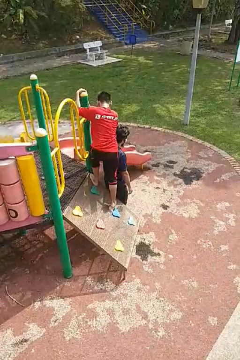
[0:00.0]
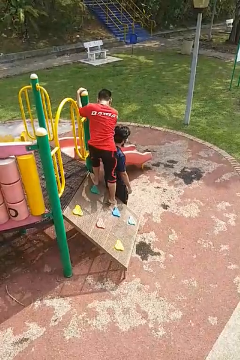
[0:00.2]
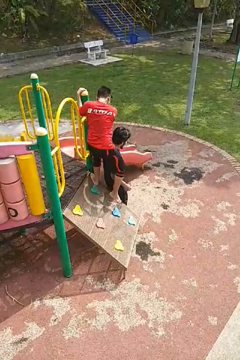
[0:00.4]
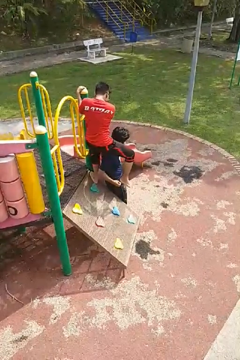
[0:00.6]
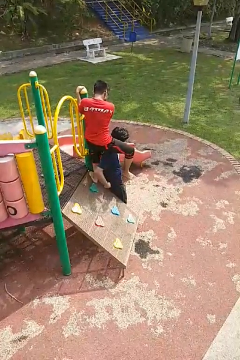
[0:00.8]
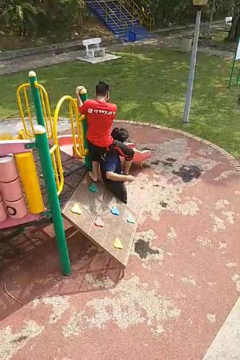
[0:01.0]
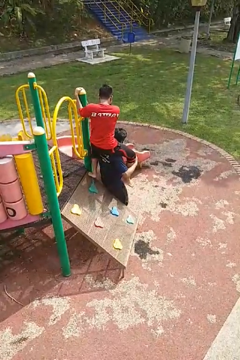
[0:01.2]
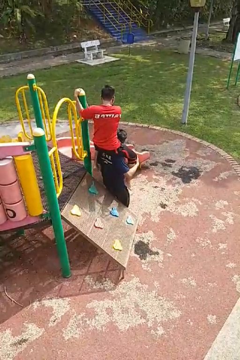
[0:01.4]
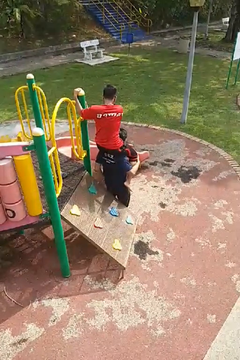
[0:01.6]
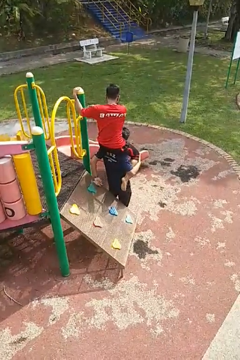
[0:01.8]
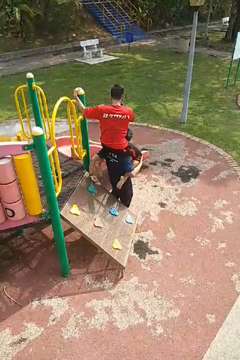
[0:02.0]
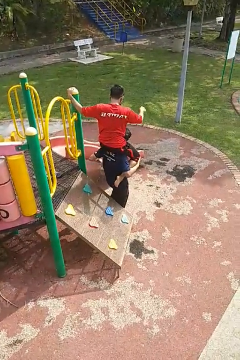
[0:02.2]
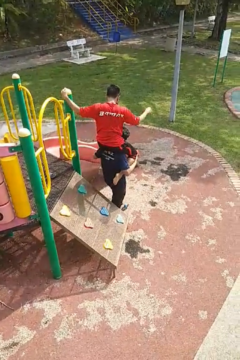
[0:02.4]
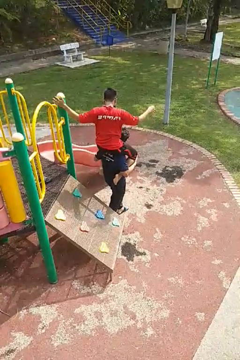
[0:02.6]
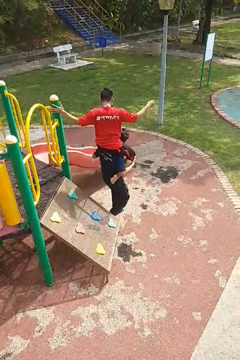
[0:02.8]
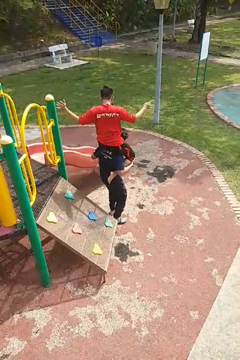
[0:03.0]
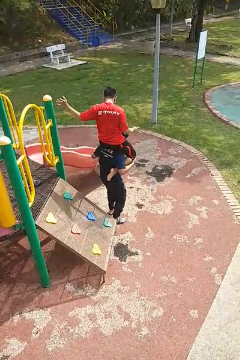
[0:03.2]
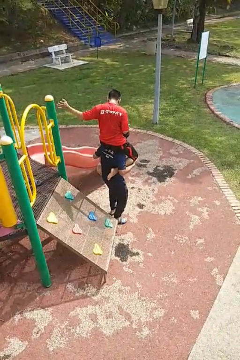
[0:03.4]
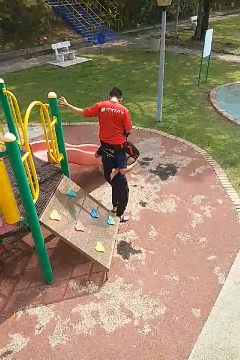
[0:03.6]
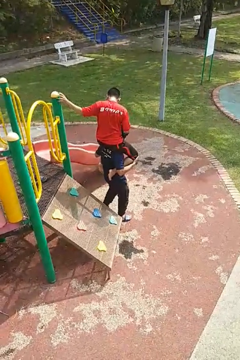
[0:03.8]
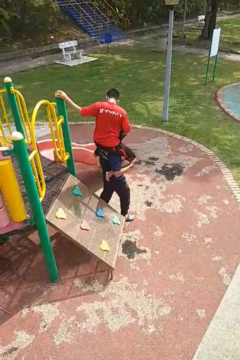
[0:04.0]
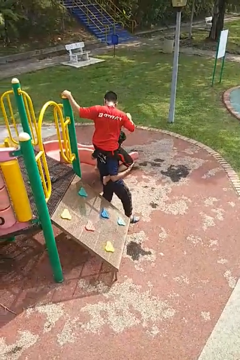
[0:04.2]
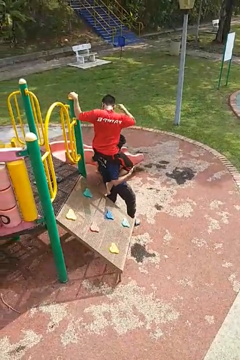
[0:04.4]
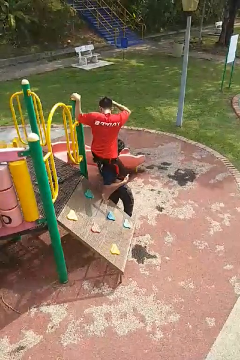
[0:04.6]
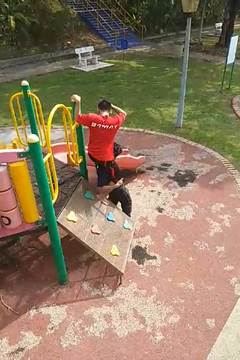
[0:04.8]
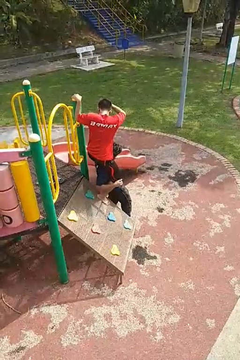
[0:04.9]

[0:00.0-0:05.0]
person carries person on shoulders

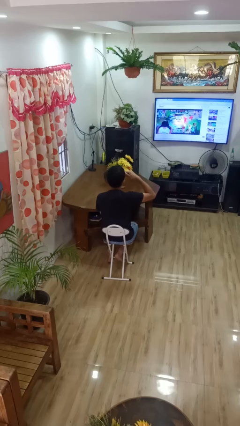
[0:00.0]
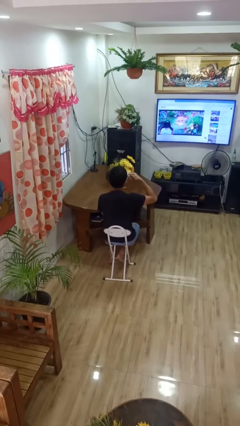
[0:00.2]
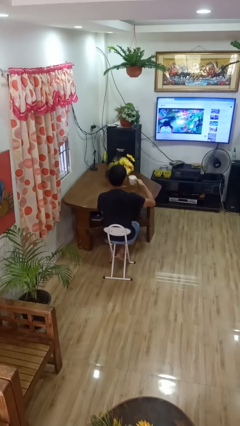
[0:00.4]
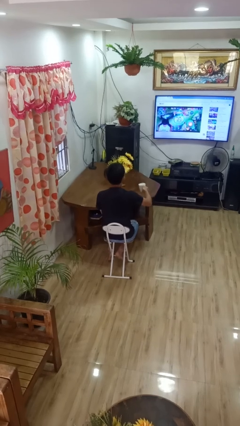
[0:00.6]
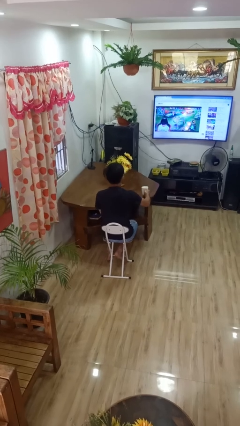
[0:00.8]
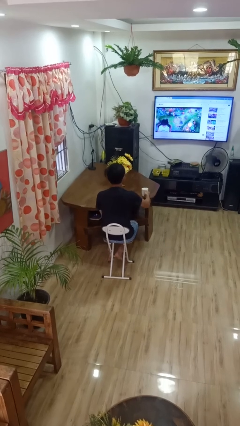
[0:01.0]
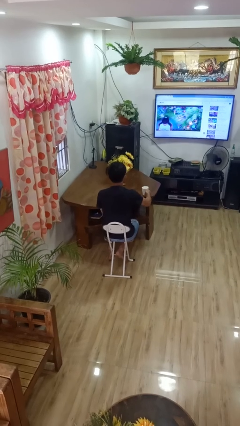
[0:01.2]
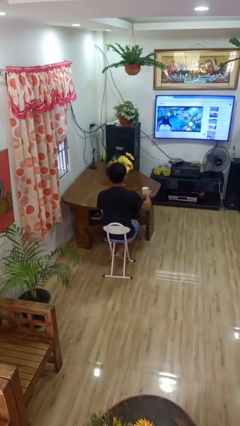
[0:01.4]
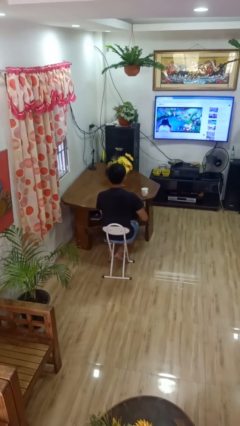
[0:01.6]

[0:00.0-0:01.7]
person puts down object on table

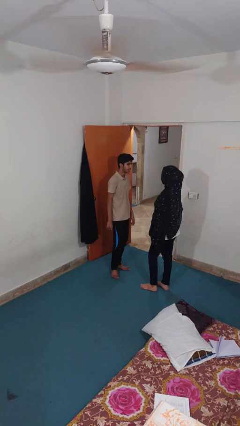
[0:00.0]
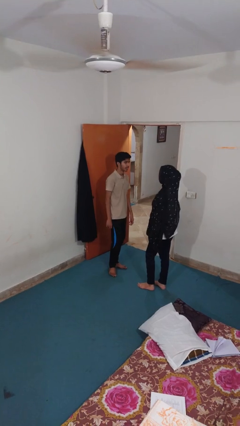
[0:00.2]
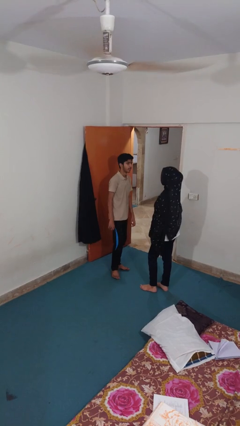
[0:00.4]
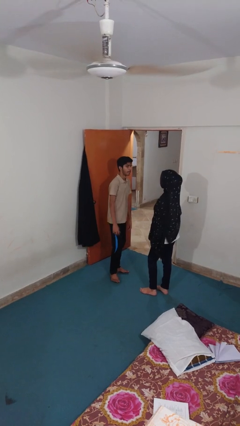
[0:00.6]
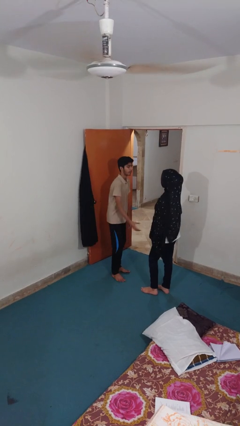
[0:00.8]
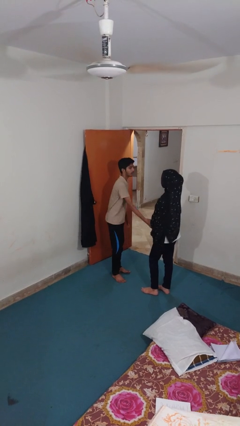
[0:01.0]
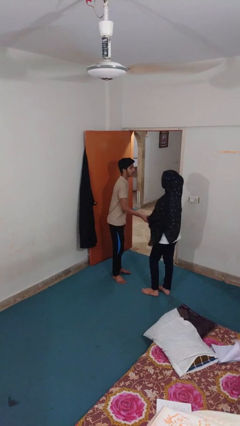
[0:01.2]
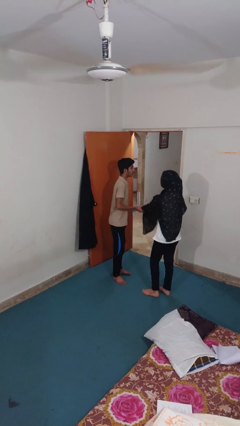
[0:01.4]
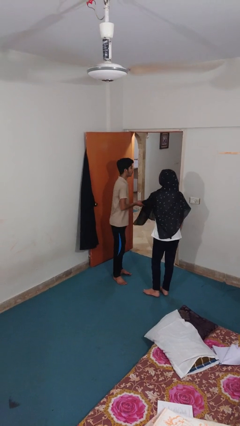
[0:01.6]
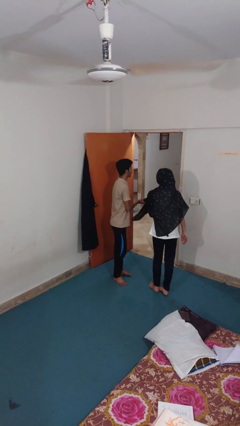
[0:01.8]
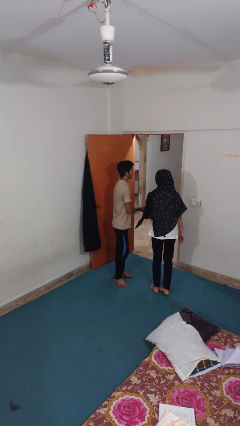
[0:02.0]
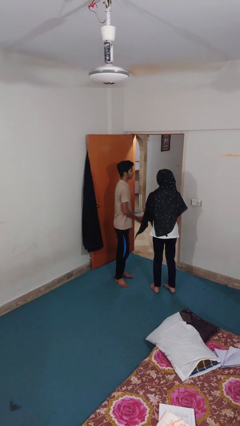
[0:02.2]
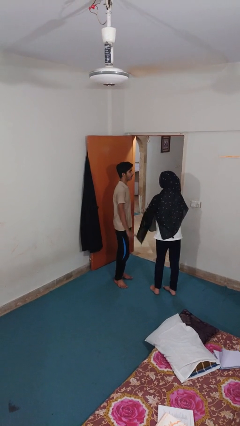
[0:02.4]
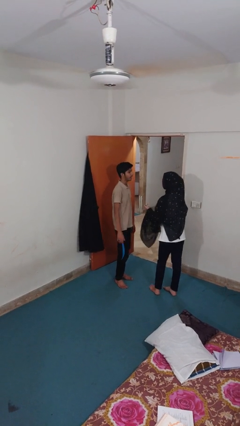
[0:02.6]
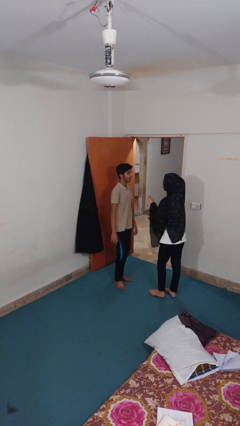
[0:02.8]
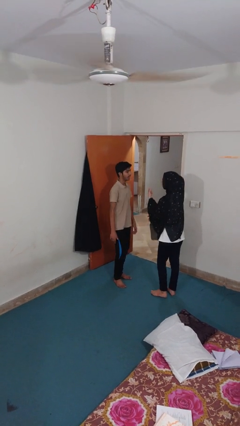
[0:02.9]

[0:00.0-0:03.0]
person grabs person by forearm

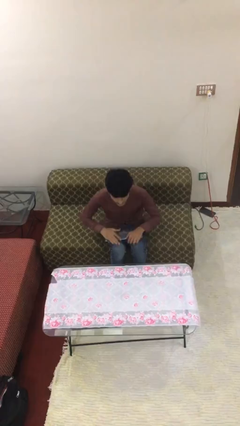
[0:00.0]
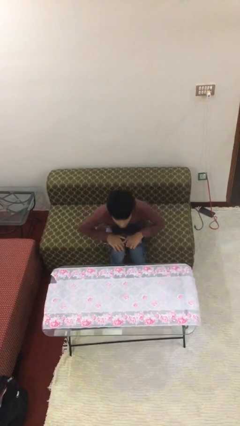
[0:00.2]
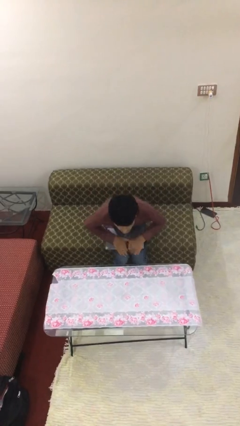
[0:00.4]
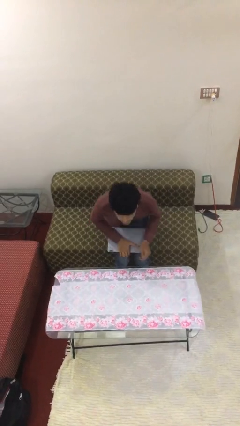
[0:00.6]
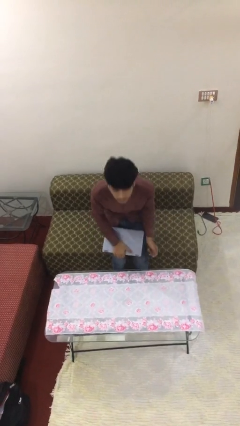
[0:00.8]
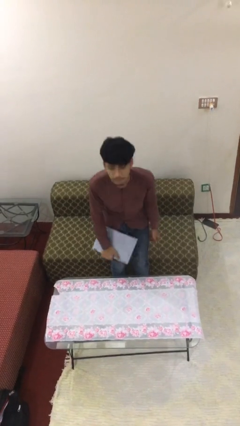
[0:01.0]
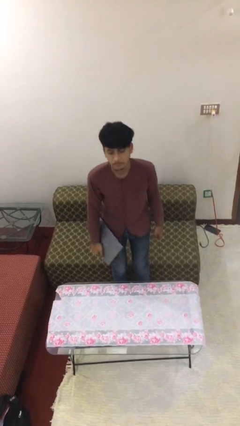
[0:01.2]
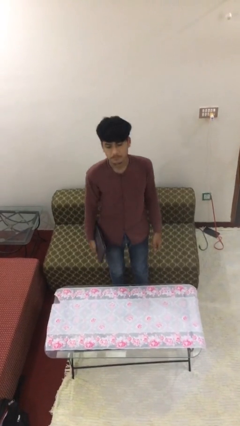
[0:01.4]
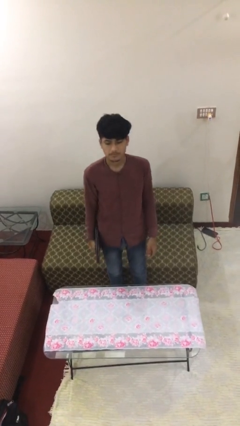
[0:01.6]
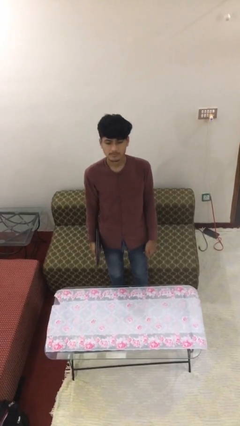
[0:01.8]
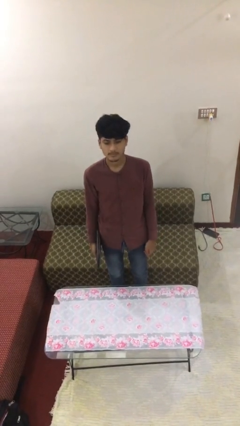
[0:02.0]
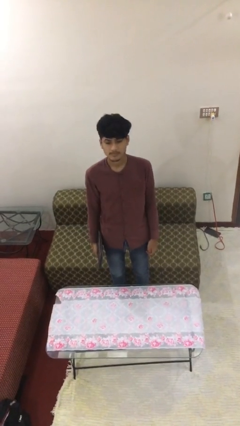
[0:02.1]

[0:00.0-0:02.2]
person stands up

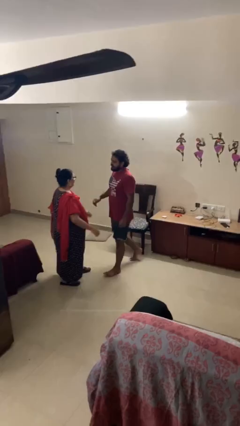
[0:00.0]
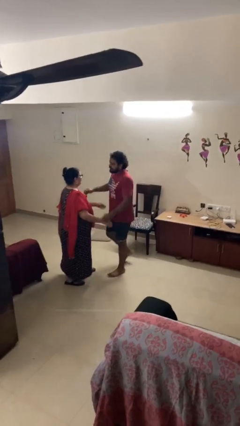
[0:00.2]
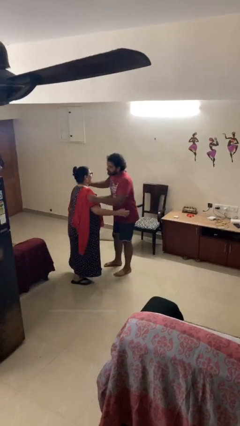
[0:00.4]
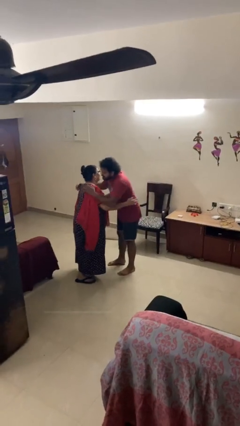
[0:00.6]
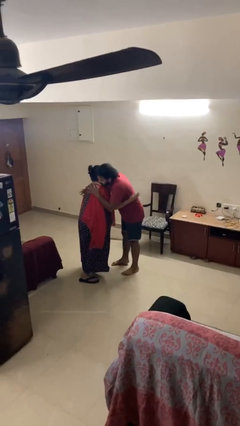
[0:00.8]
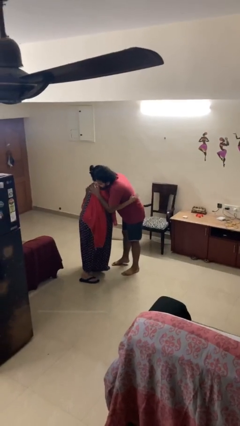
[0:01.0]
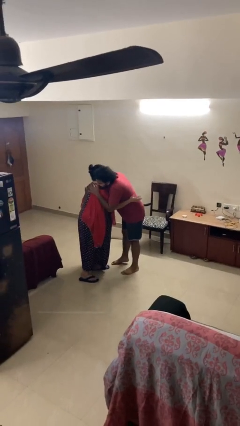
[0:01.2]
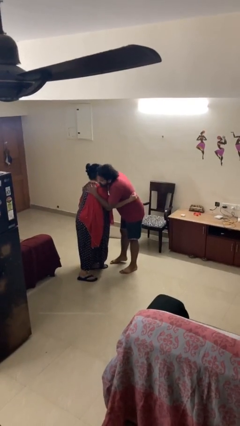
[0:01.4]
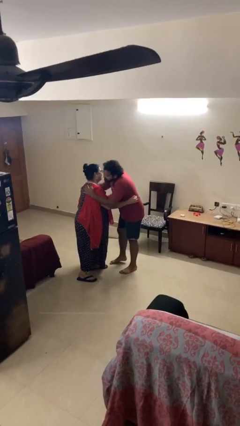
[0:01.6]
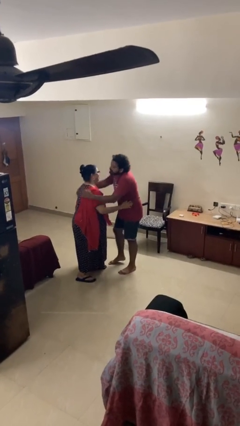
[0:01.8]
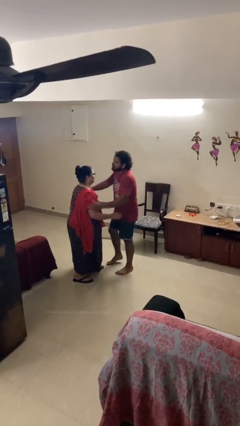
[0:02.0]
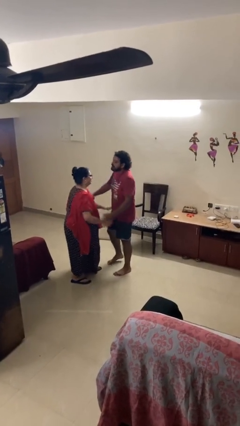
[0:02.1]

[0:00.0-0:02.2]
person embraces person

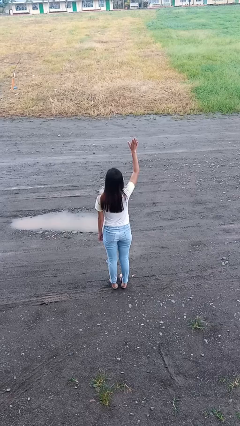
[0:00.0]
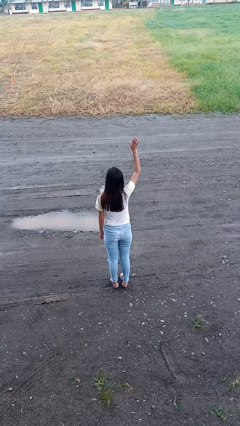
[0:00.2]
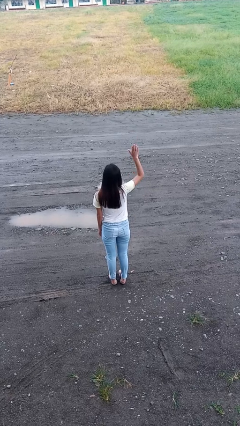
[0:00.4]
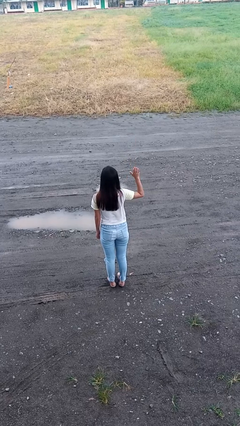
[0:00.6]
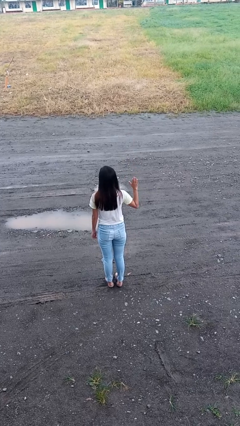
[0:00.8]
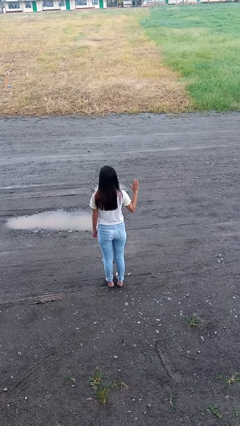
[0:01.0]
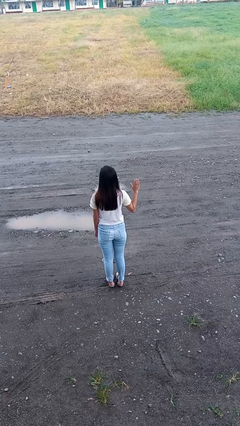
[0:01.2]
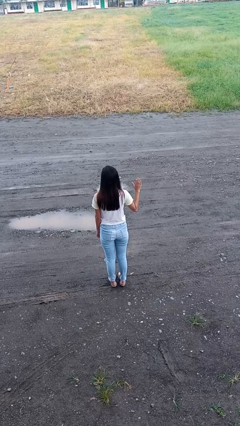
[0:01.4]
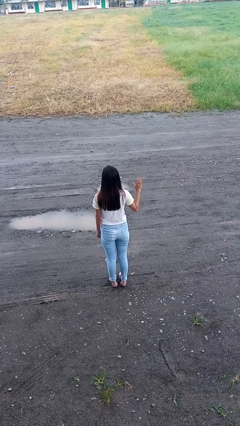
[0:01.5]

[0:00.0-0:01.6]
person gestures lower hand

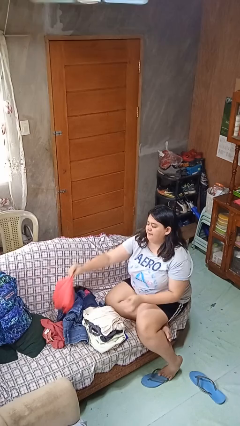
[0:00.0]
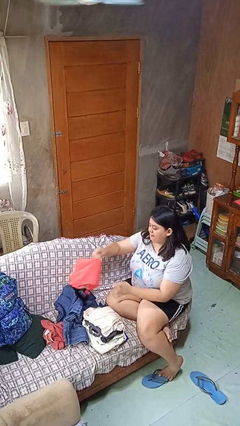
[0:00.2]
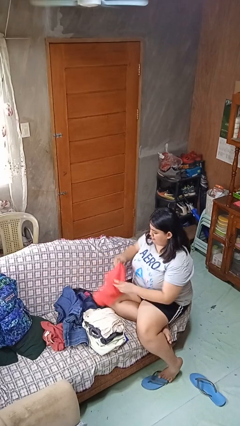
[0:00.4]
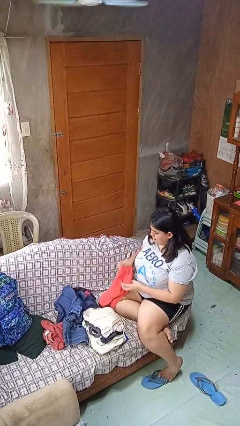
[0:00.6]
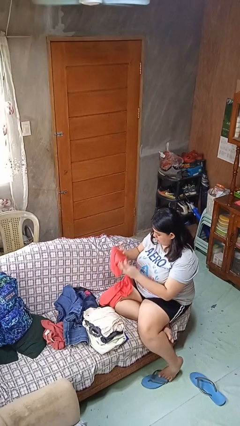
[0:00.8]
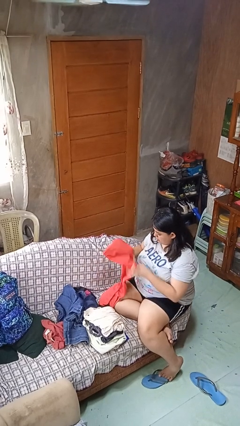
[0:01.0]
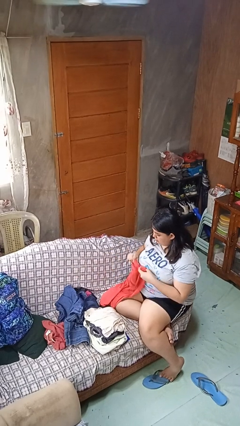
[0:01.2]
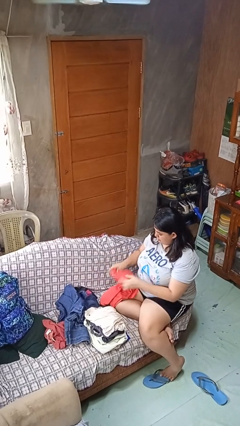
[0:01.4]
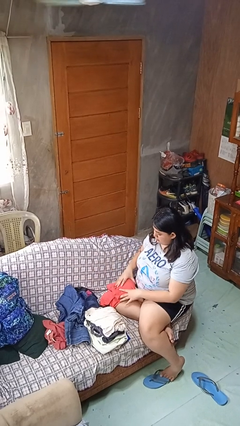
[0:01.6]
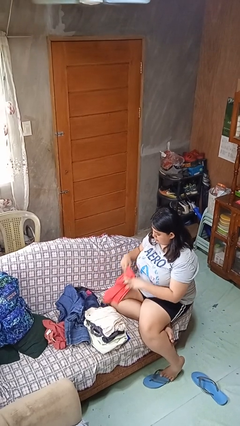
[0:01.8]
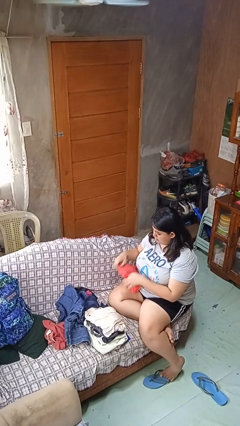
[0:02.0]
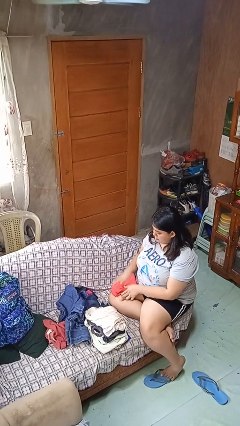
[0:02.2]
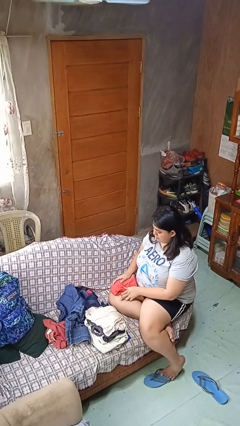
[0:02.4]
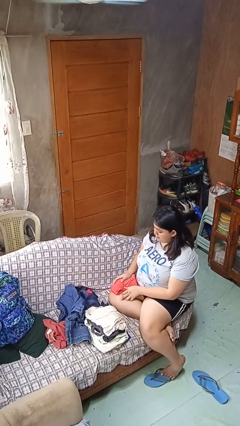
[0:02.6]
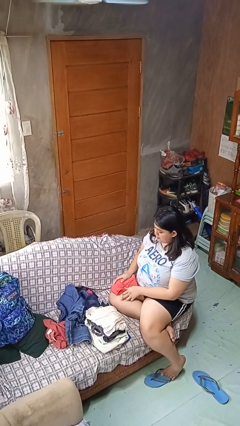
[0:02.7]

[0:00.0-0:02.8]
person folds shirt
